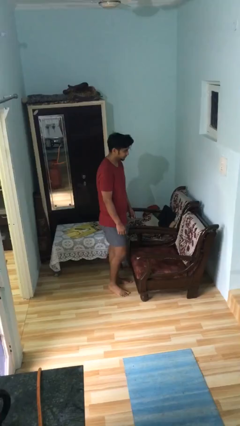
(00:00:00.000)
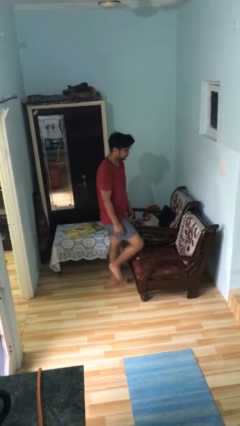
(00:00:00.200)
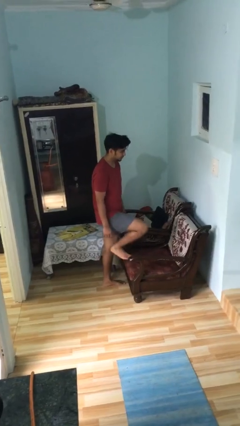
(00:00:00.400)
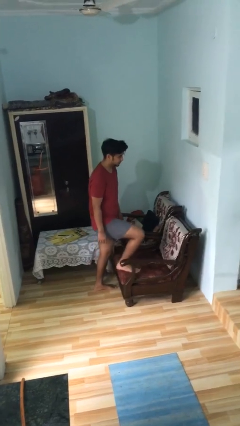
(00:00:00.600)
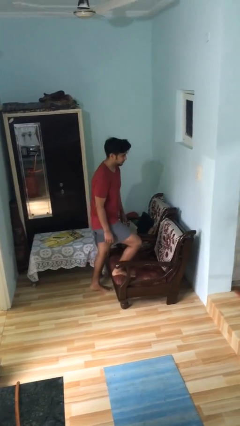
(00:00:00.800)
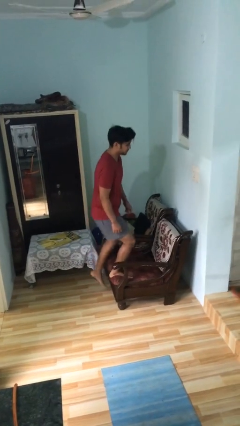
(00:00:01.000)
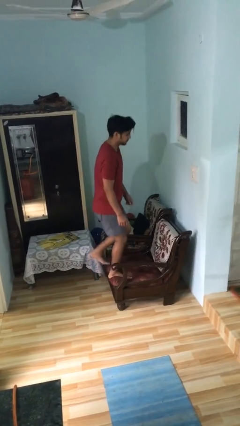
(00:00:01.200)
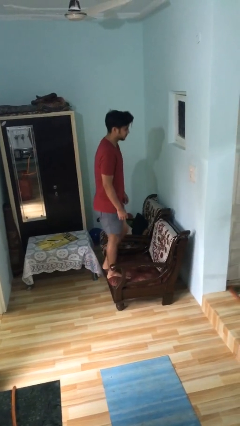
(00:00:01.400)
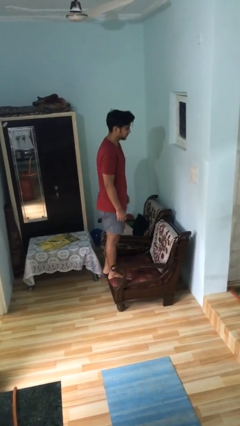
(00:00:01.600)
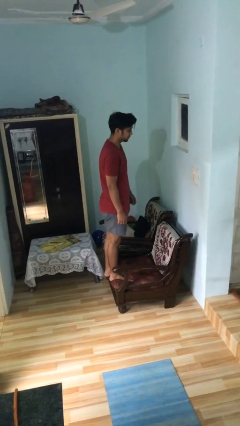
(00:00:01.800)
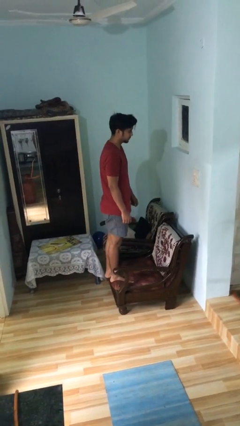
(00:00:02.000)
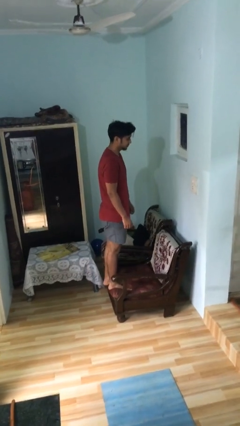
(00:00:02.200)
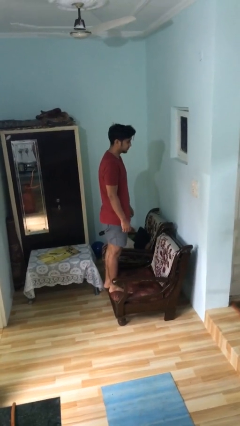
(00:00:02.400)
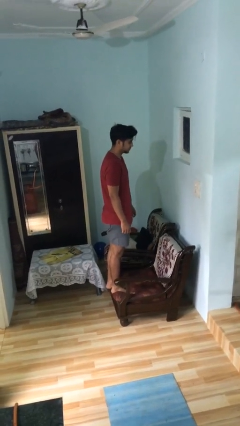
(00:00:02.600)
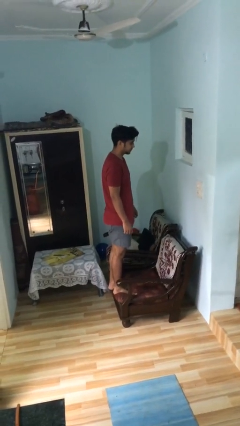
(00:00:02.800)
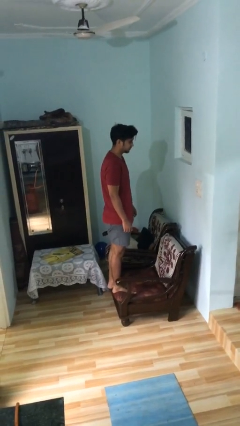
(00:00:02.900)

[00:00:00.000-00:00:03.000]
person climbs on couch

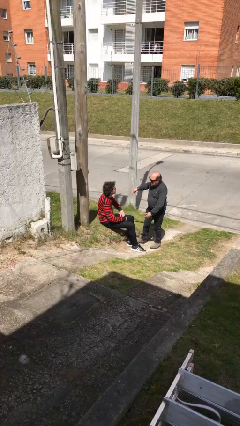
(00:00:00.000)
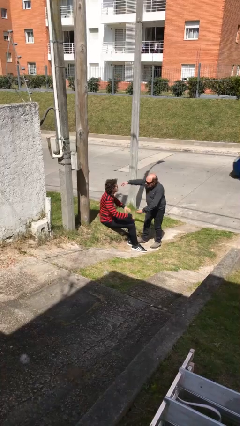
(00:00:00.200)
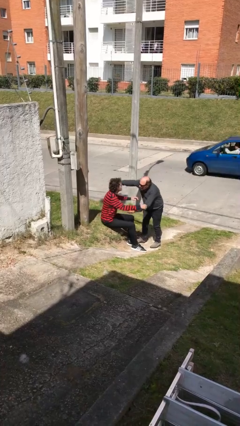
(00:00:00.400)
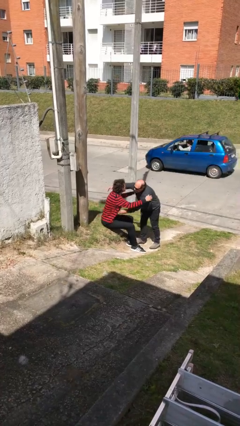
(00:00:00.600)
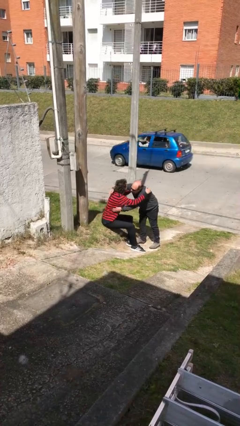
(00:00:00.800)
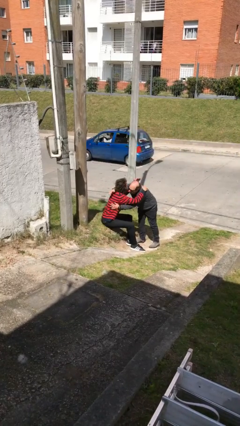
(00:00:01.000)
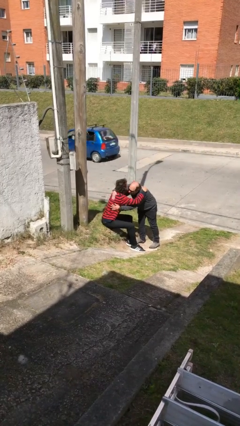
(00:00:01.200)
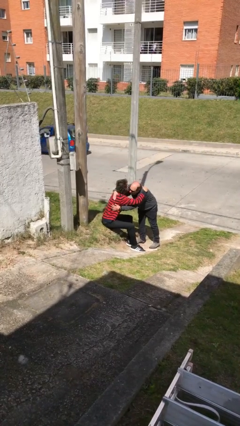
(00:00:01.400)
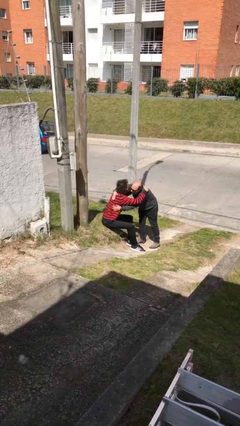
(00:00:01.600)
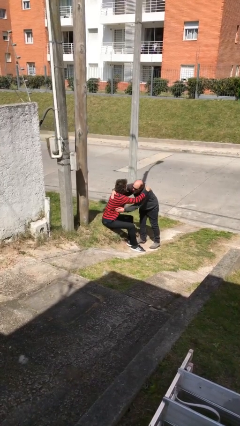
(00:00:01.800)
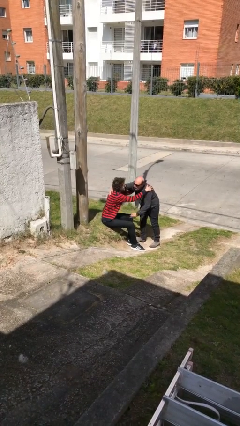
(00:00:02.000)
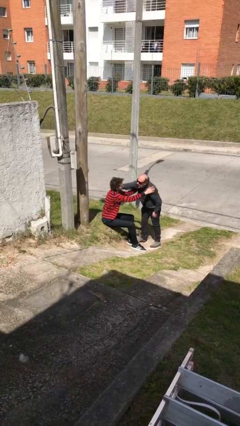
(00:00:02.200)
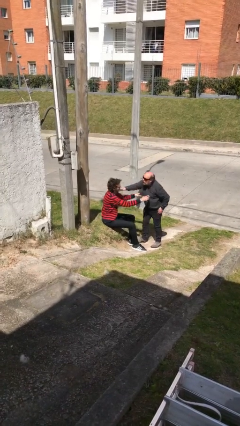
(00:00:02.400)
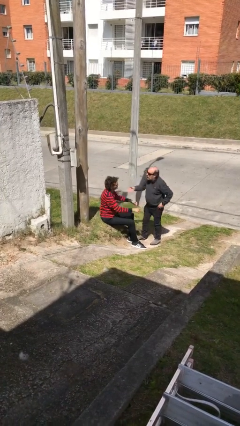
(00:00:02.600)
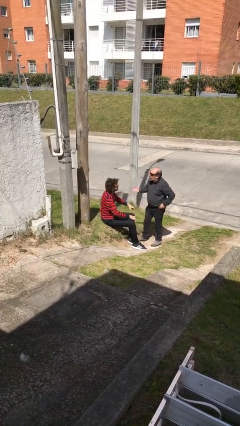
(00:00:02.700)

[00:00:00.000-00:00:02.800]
person embraces person

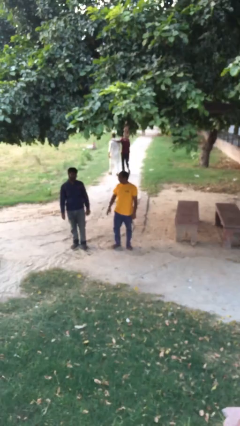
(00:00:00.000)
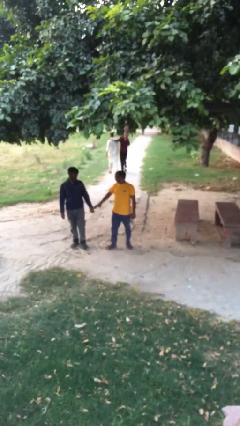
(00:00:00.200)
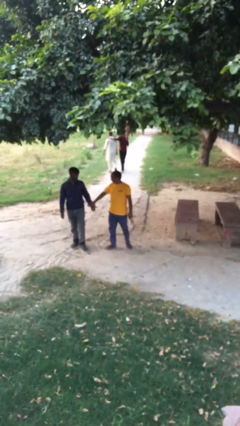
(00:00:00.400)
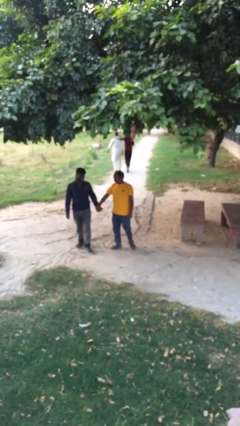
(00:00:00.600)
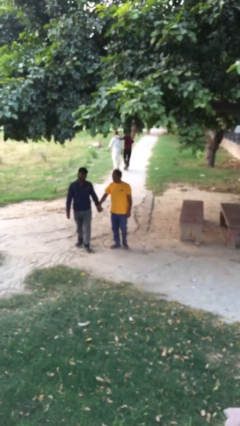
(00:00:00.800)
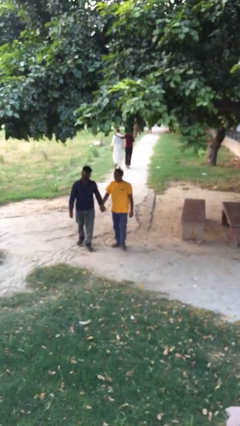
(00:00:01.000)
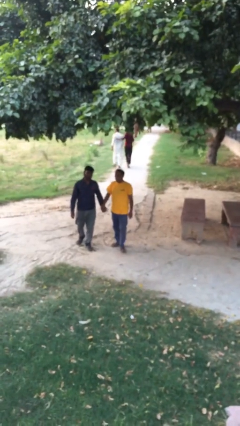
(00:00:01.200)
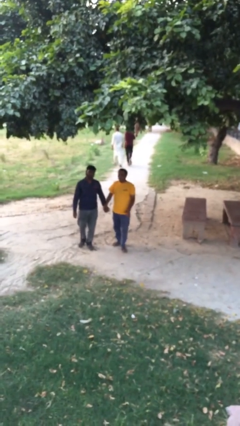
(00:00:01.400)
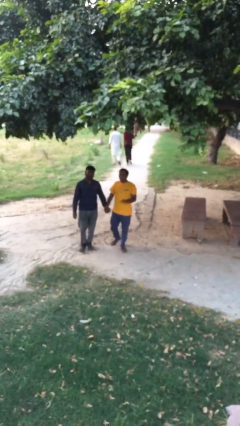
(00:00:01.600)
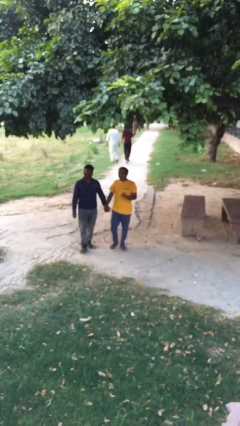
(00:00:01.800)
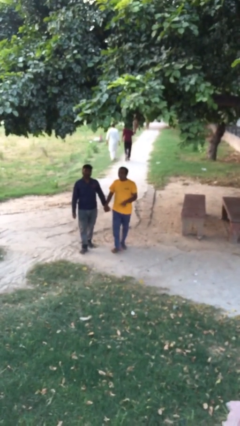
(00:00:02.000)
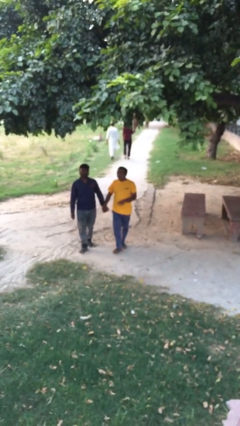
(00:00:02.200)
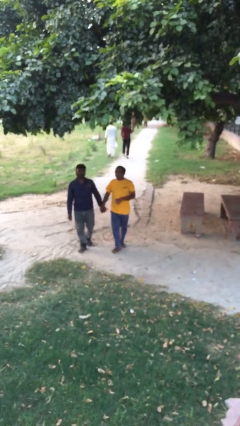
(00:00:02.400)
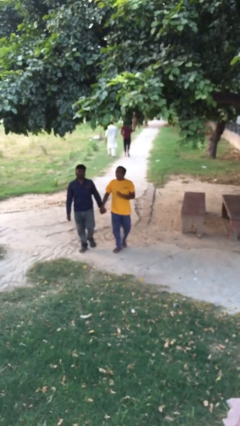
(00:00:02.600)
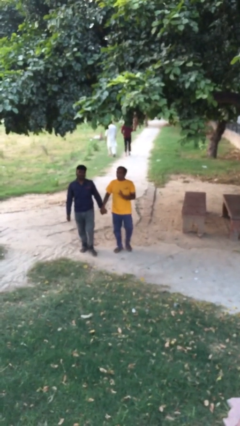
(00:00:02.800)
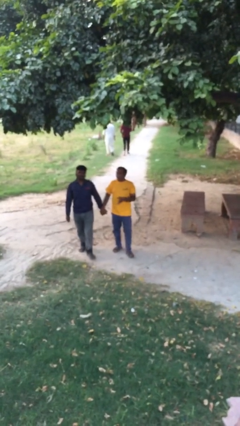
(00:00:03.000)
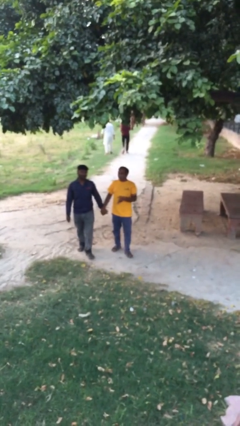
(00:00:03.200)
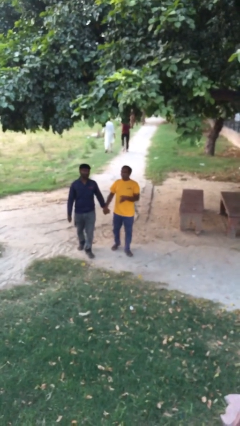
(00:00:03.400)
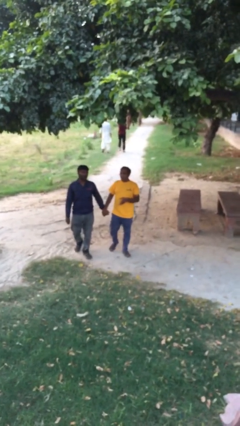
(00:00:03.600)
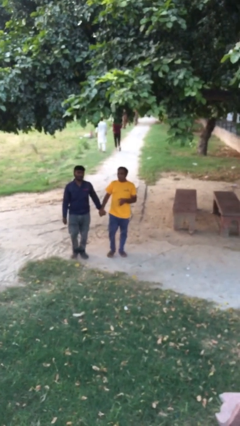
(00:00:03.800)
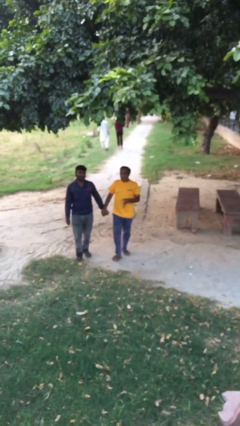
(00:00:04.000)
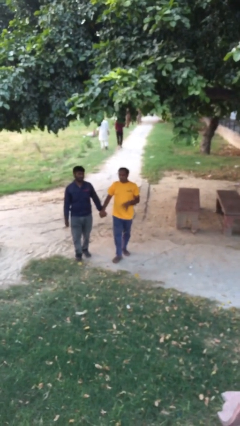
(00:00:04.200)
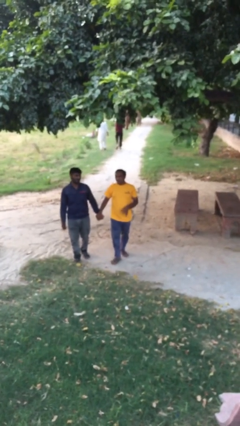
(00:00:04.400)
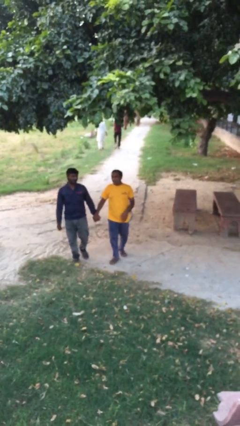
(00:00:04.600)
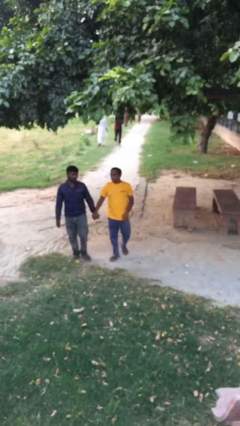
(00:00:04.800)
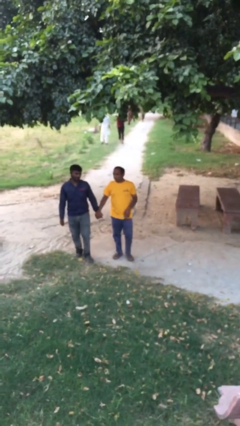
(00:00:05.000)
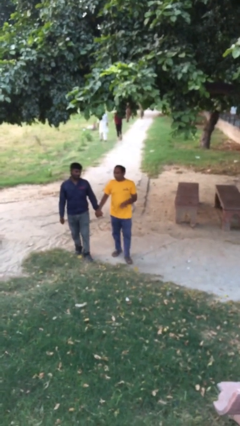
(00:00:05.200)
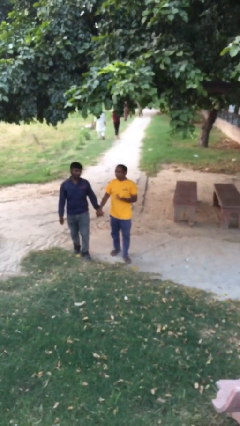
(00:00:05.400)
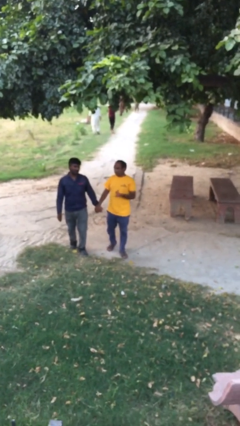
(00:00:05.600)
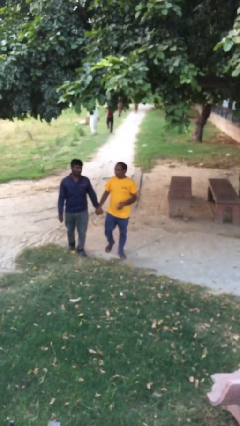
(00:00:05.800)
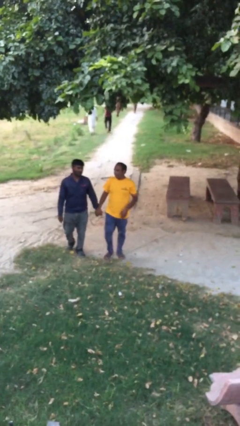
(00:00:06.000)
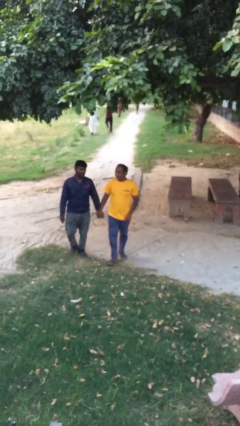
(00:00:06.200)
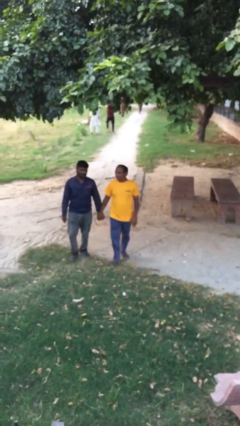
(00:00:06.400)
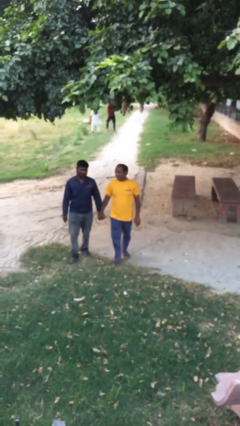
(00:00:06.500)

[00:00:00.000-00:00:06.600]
person holds hand

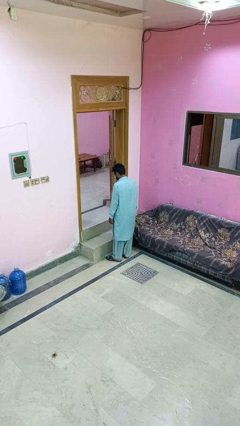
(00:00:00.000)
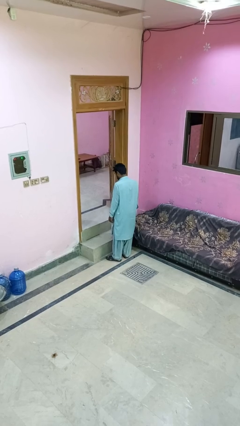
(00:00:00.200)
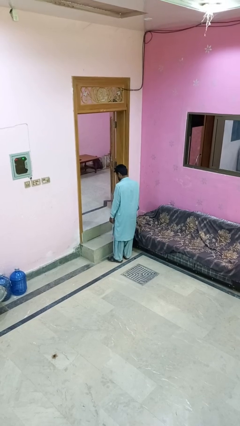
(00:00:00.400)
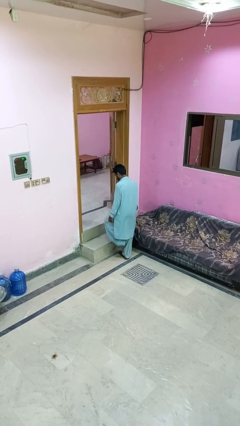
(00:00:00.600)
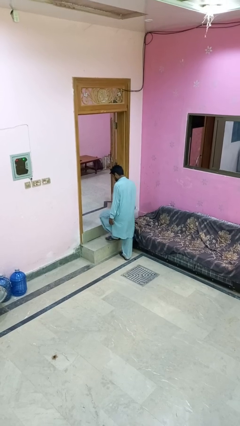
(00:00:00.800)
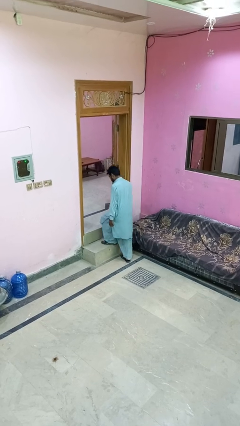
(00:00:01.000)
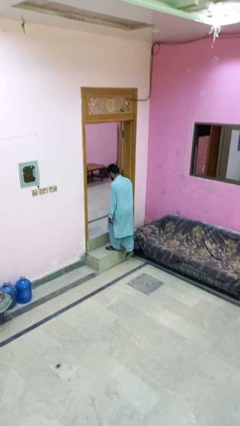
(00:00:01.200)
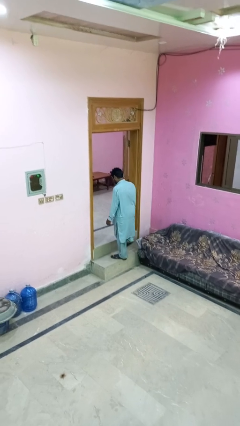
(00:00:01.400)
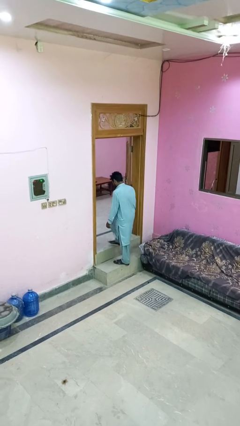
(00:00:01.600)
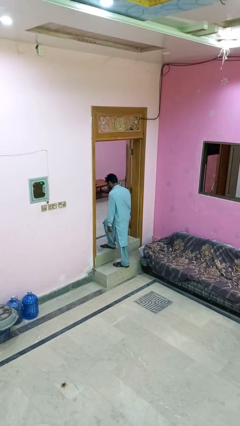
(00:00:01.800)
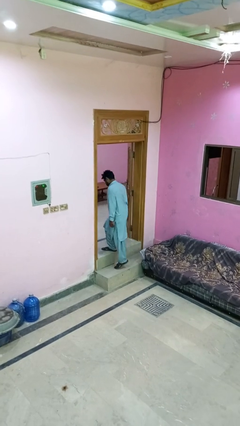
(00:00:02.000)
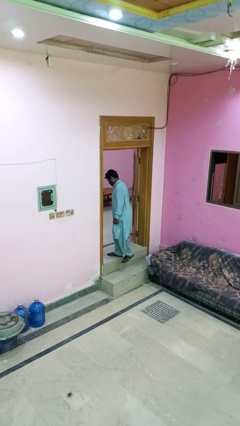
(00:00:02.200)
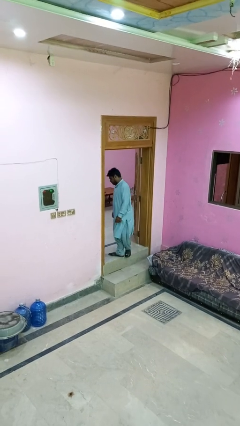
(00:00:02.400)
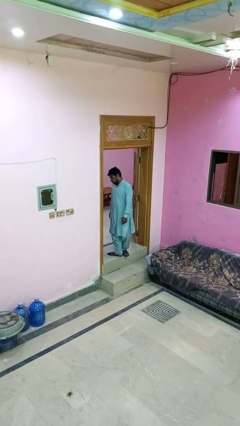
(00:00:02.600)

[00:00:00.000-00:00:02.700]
person climbs up stairs

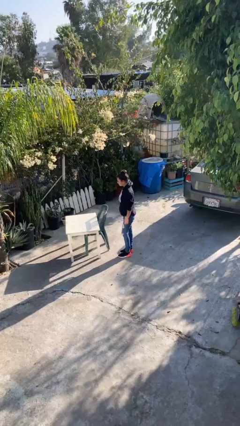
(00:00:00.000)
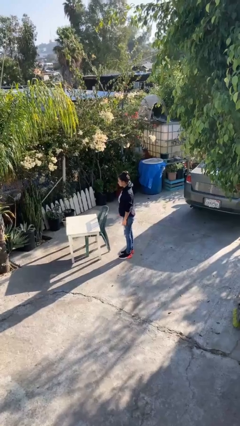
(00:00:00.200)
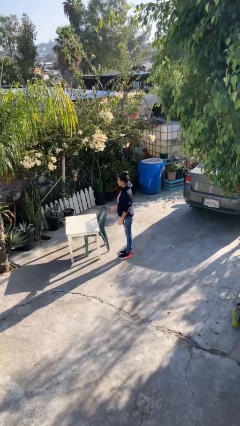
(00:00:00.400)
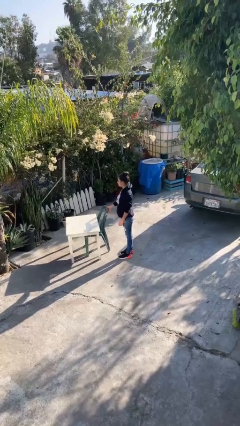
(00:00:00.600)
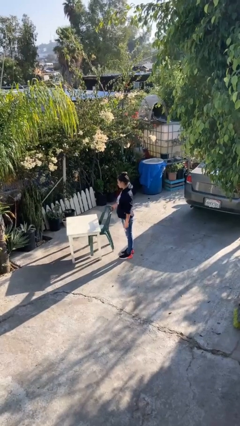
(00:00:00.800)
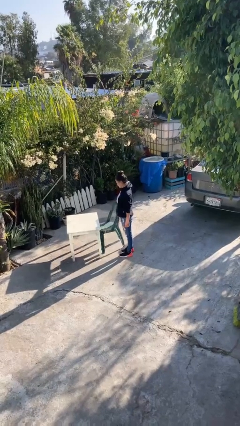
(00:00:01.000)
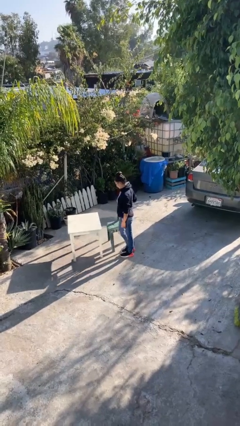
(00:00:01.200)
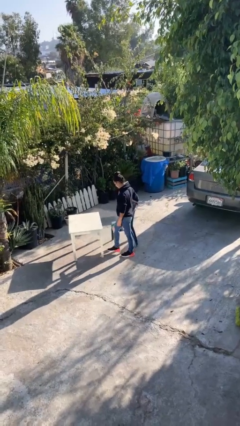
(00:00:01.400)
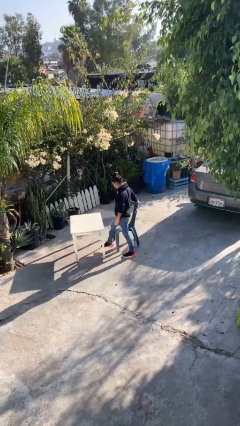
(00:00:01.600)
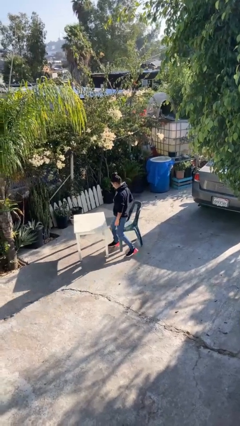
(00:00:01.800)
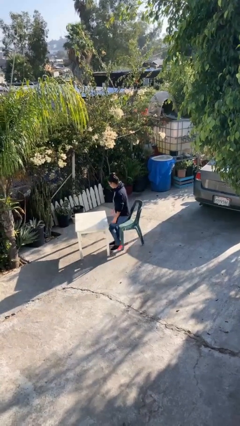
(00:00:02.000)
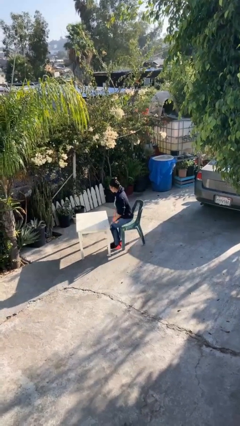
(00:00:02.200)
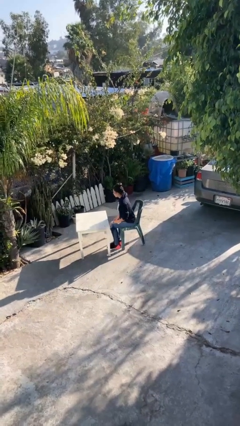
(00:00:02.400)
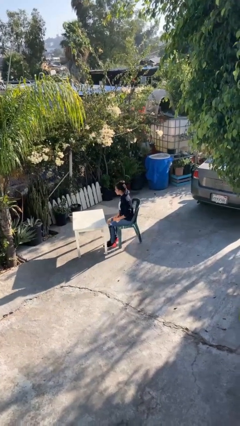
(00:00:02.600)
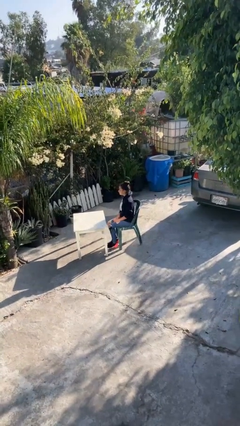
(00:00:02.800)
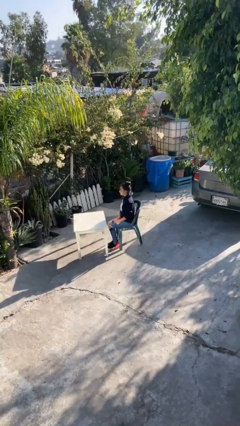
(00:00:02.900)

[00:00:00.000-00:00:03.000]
person sits down
